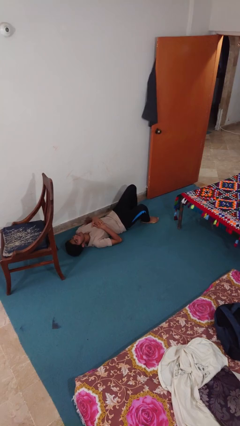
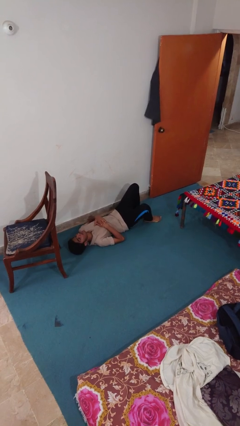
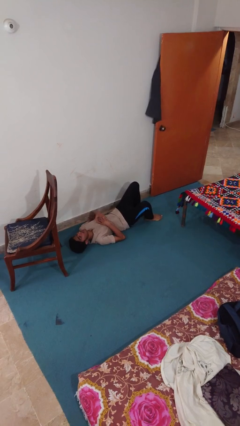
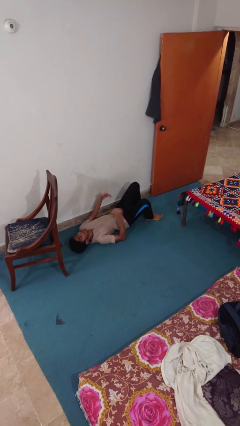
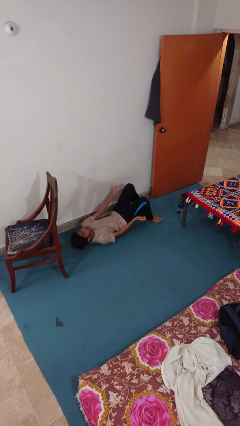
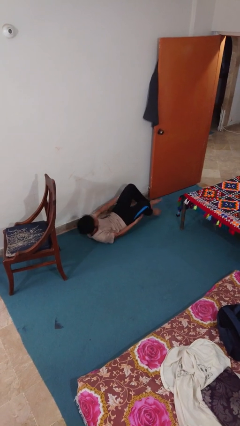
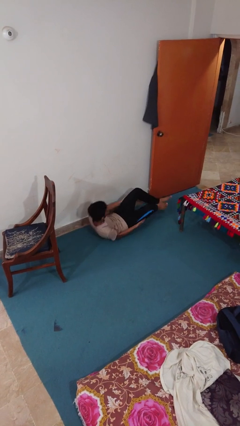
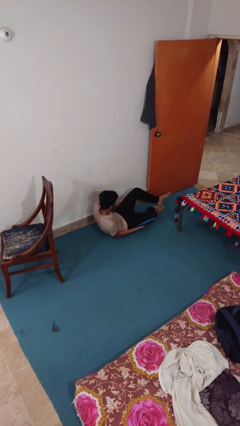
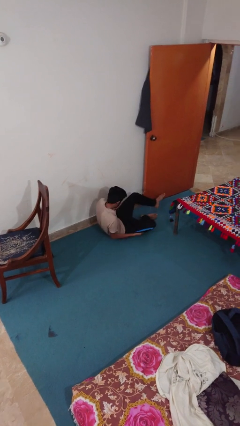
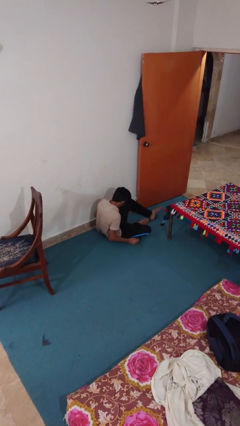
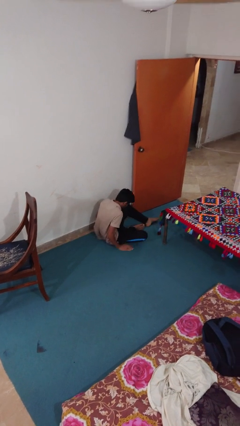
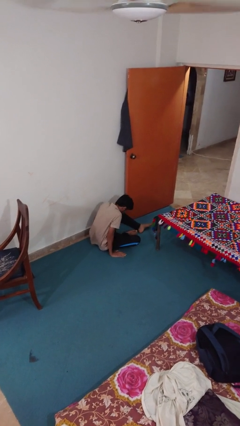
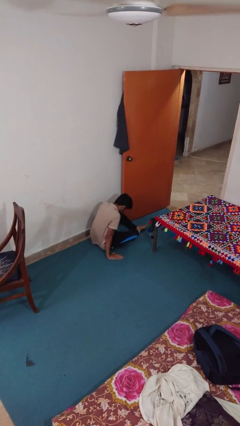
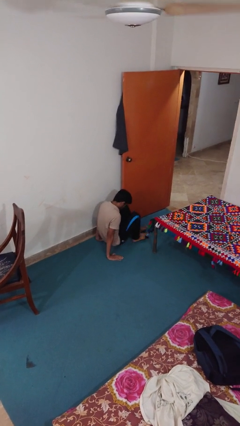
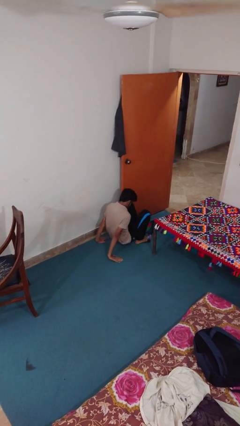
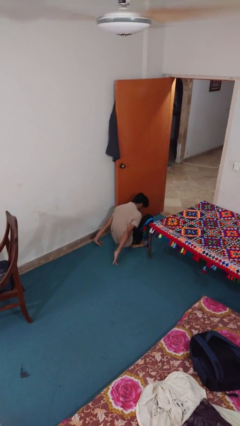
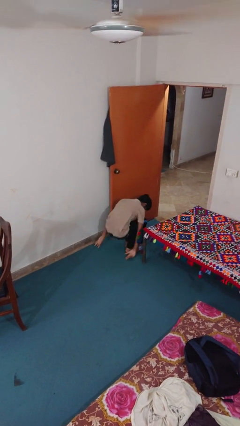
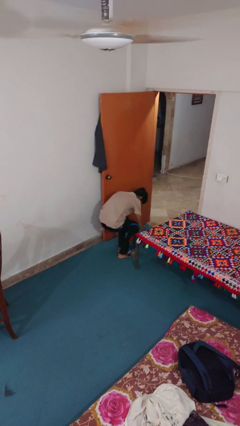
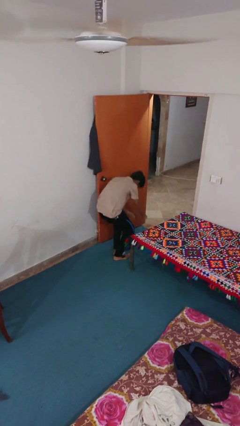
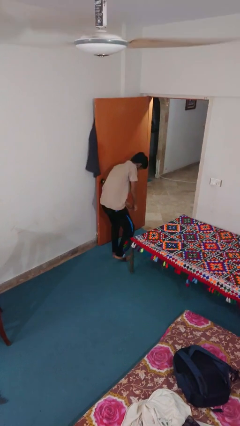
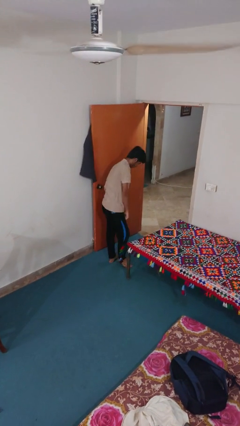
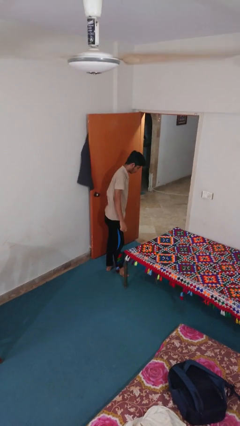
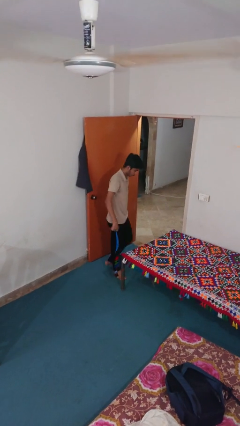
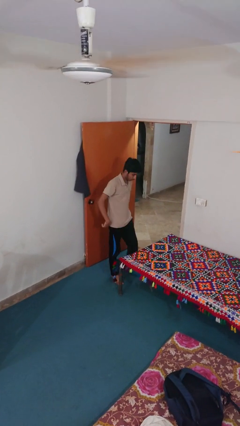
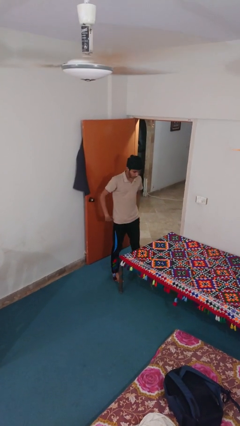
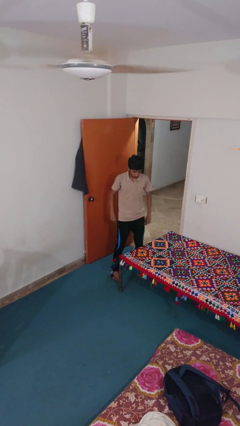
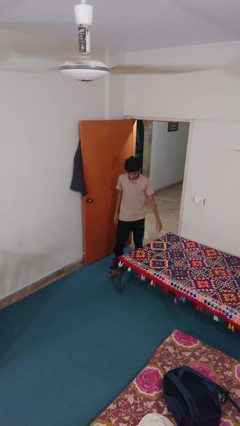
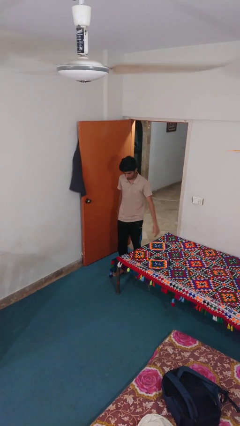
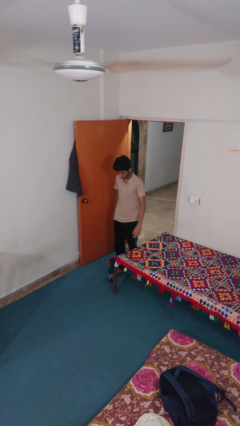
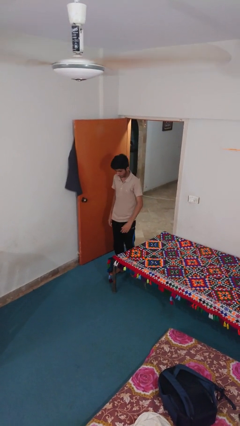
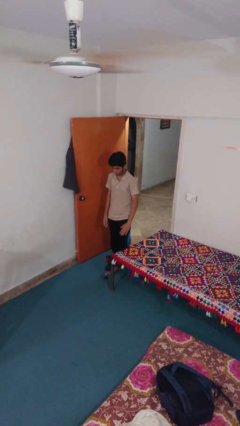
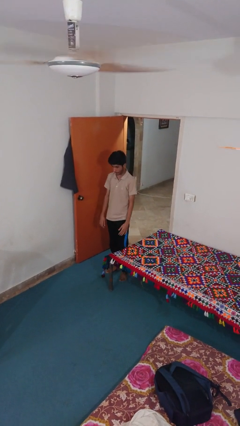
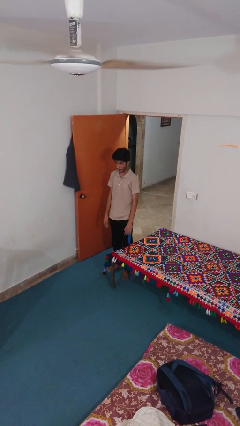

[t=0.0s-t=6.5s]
person stands up from floor

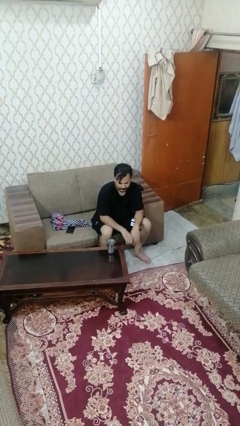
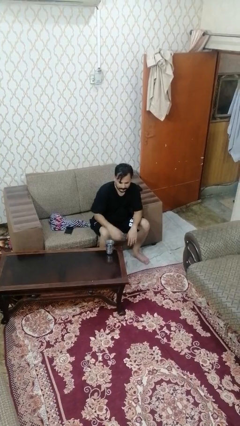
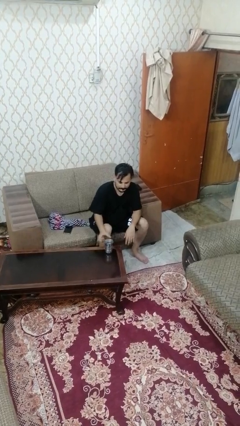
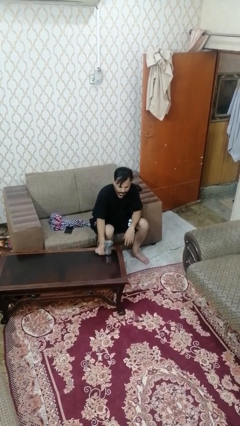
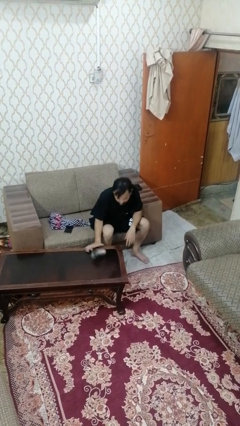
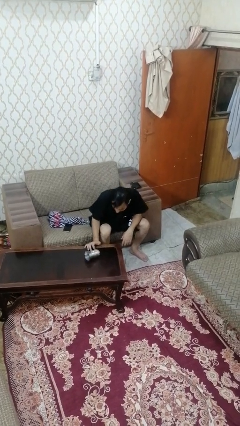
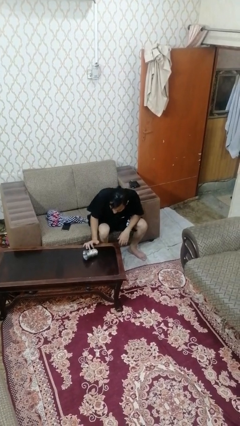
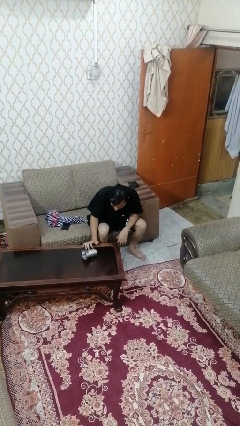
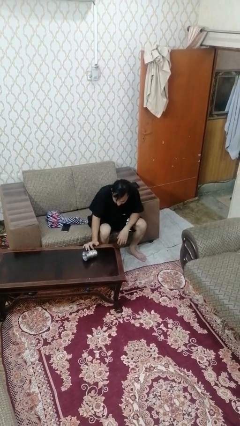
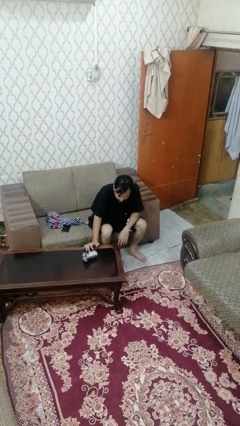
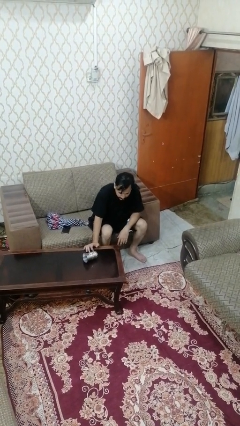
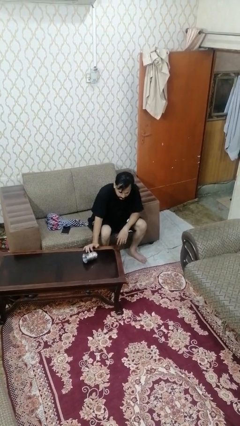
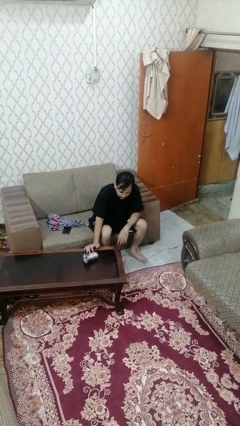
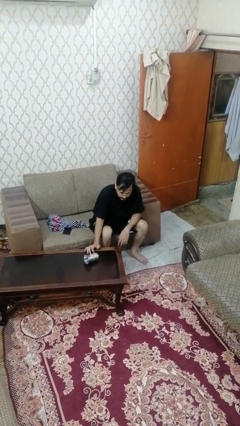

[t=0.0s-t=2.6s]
person knocks over glass

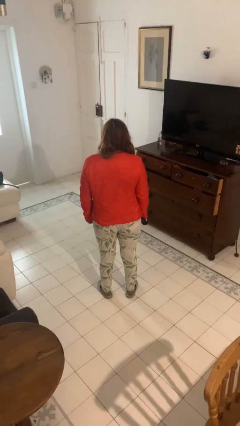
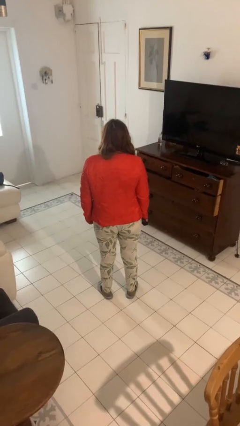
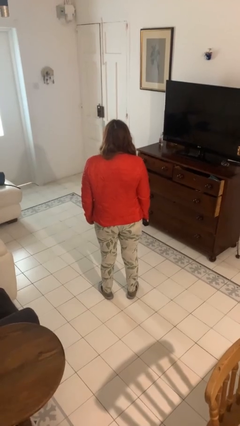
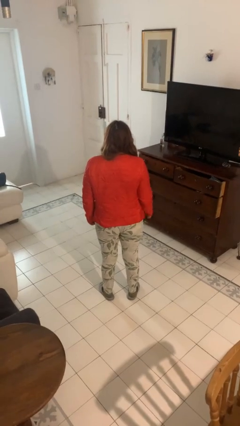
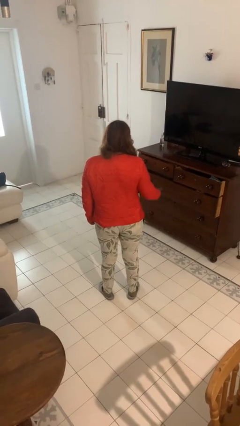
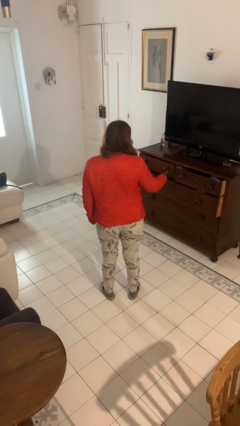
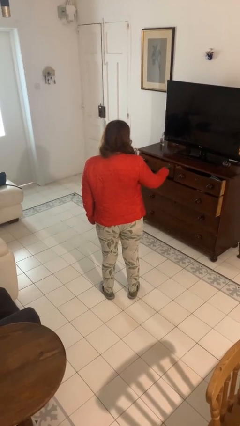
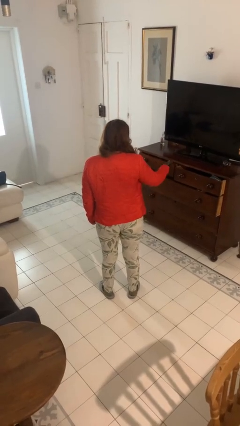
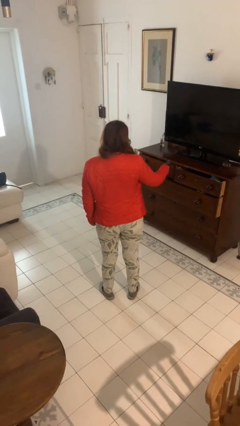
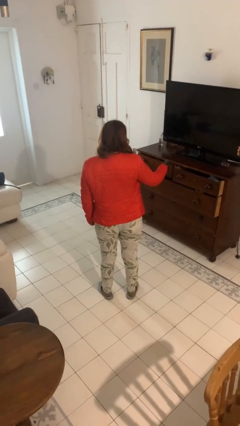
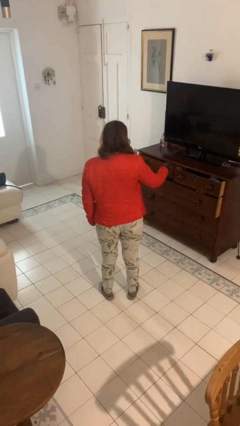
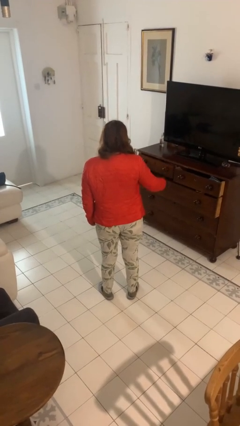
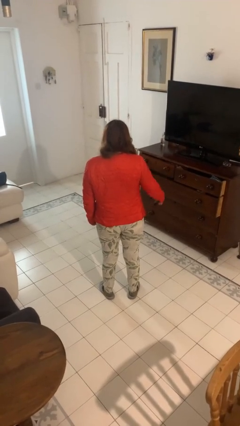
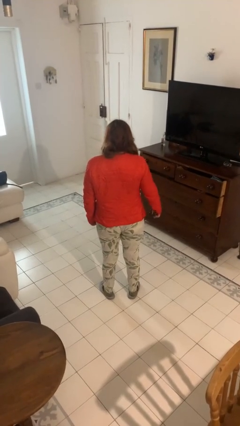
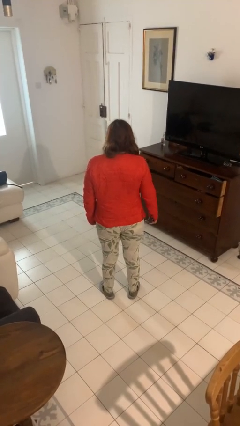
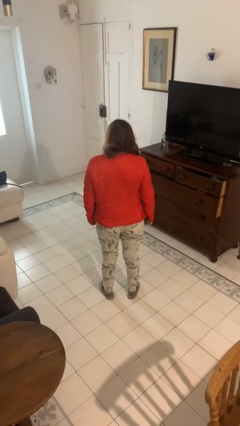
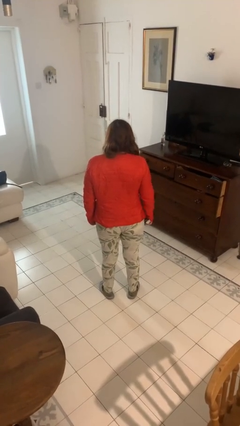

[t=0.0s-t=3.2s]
person uses television remote

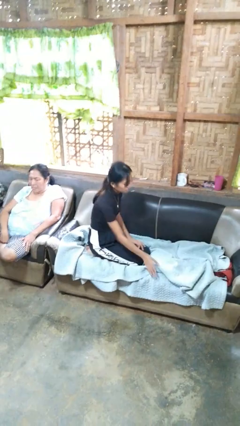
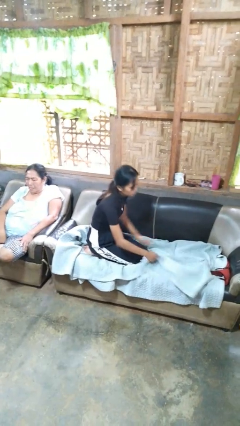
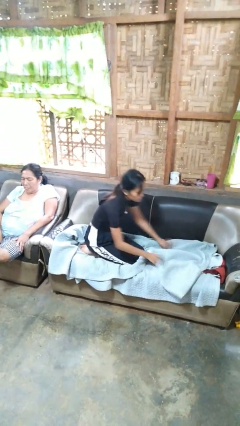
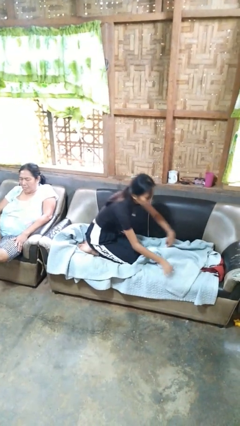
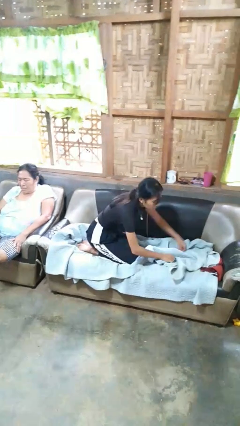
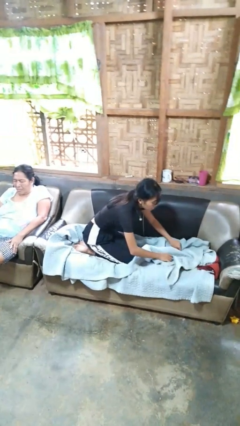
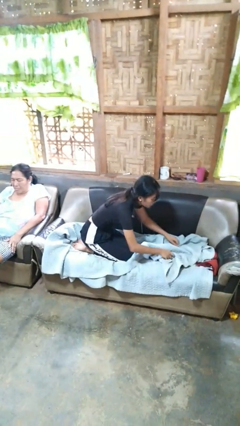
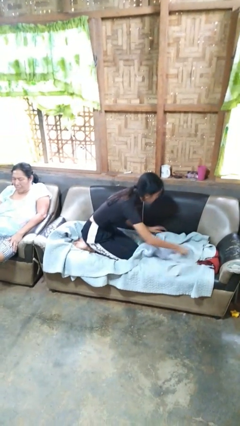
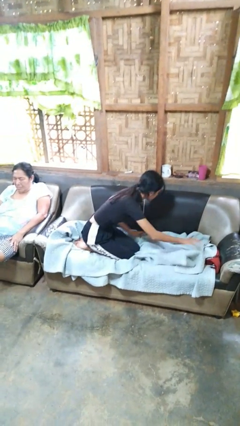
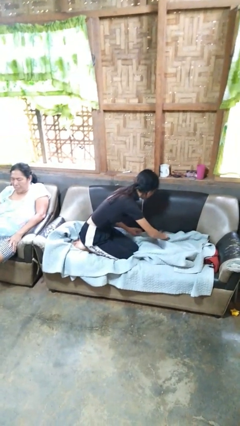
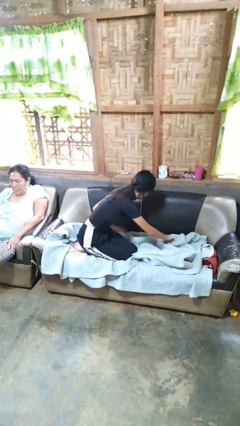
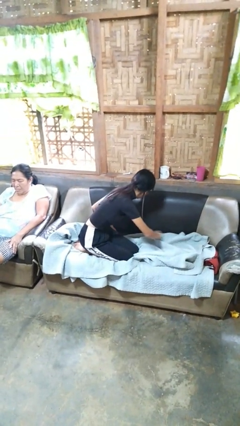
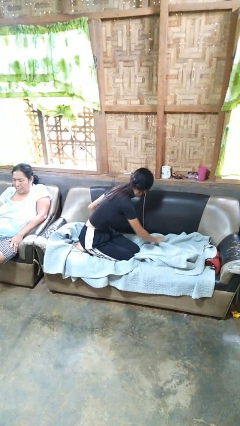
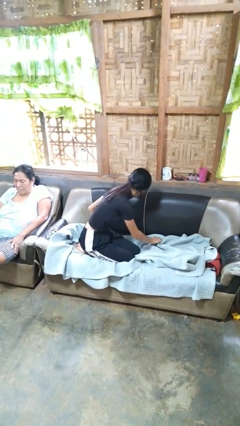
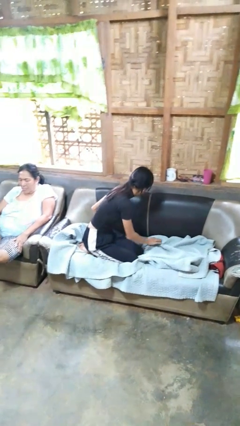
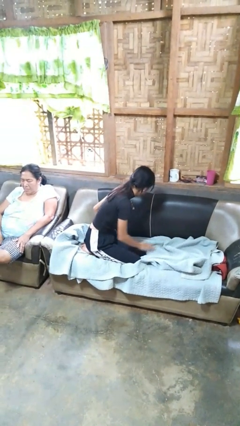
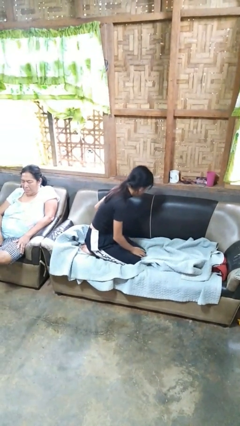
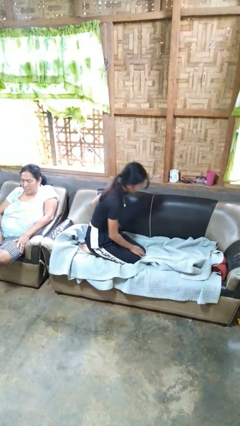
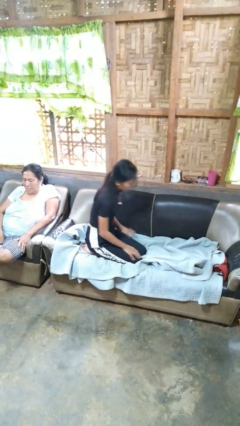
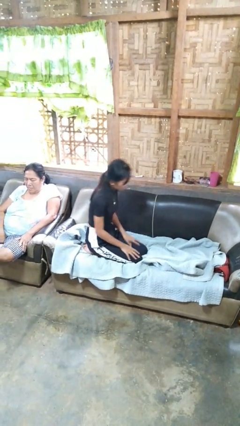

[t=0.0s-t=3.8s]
person searches in couch

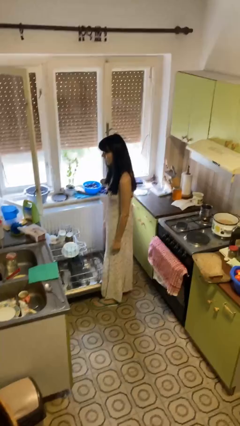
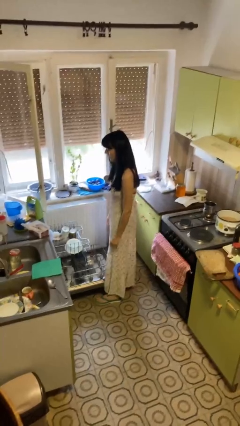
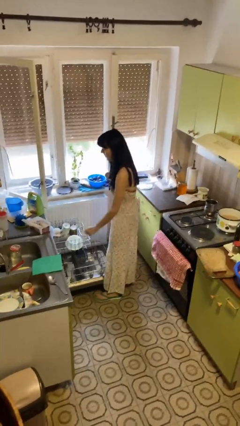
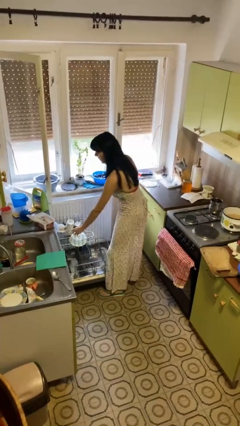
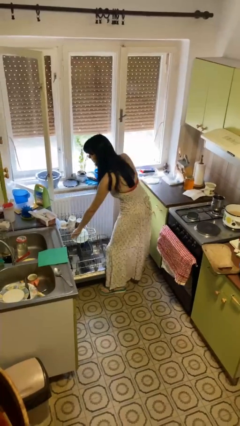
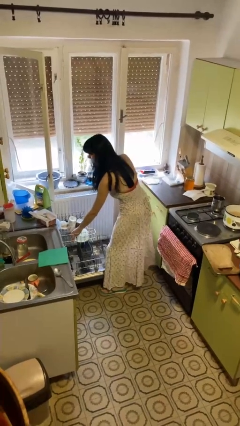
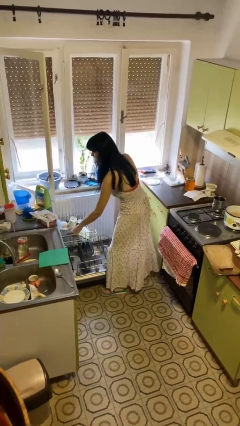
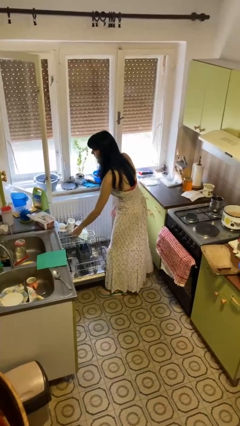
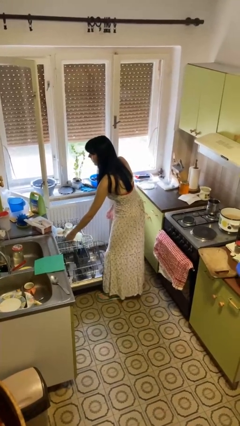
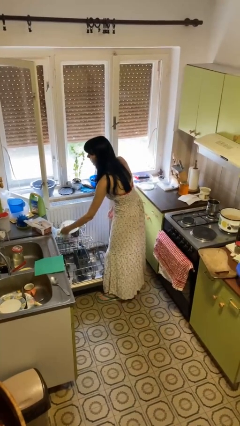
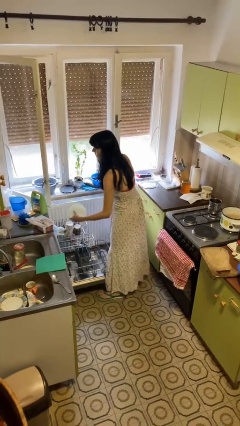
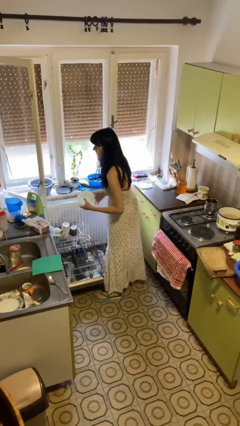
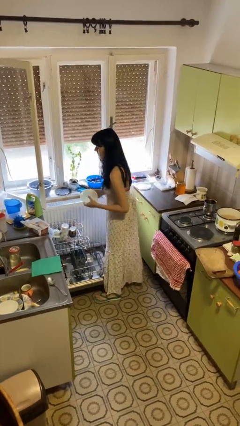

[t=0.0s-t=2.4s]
person unloads dishwasher
